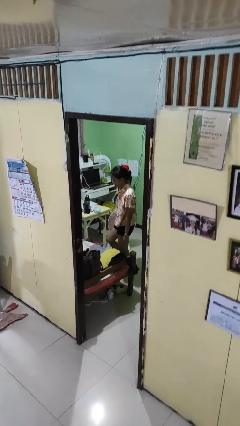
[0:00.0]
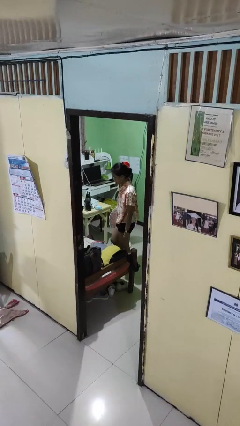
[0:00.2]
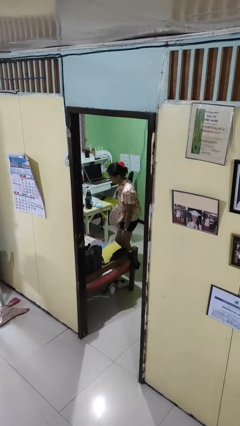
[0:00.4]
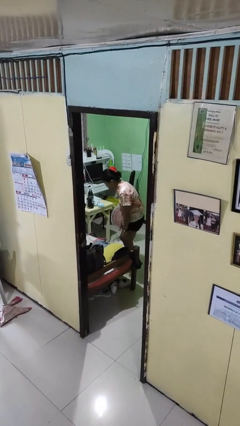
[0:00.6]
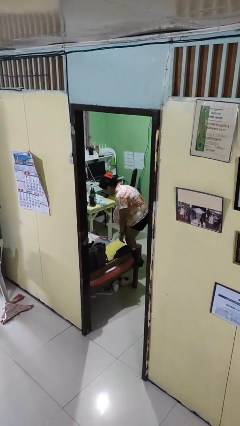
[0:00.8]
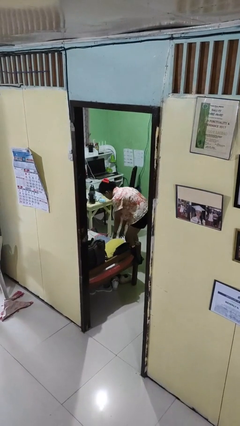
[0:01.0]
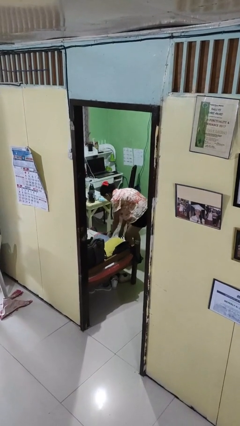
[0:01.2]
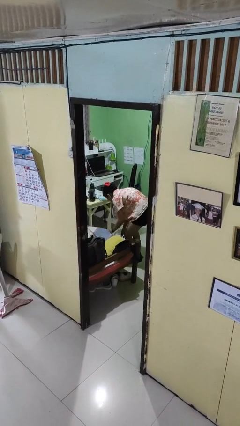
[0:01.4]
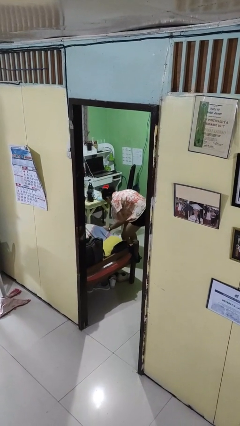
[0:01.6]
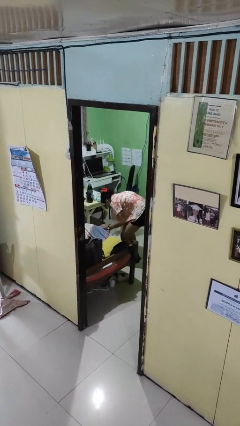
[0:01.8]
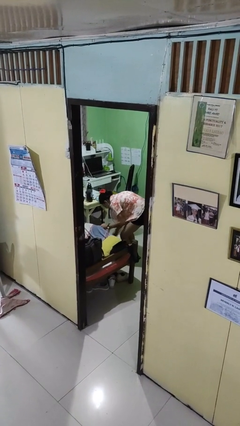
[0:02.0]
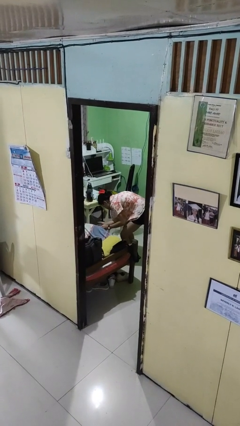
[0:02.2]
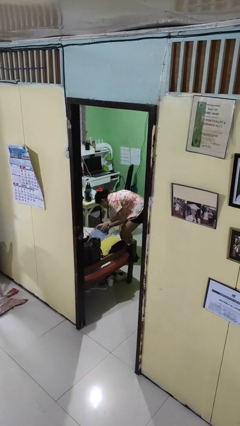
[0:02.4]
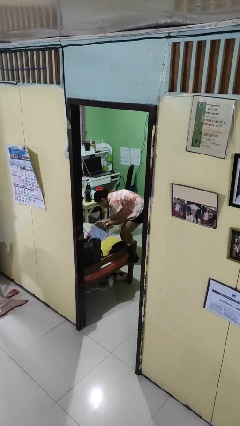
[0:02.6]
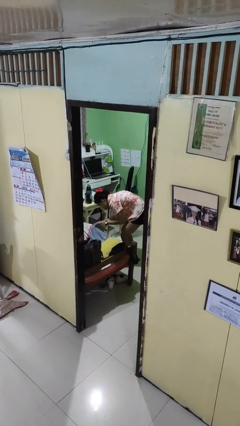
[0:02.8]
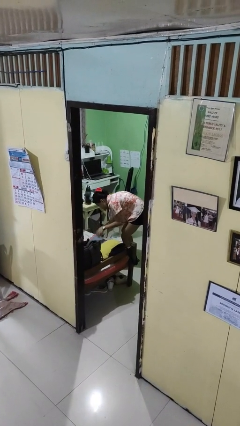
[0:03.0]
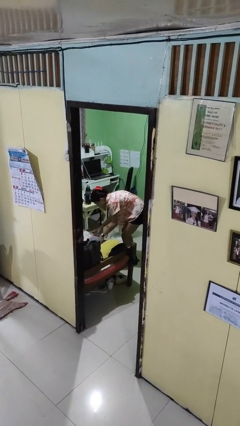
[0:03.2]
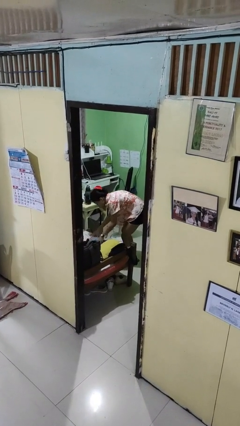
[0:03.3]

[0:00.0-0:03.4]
person searches under bed

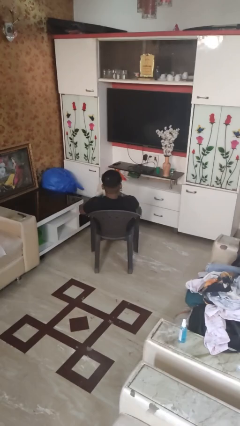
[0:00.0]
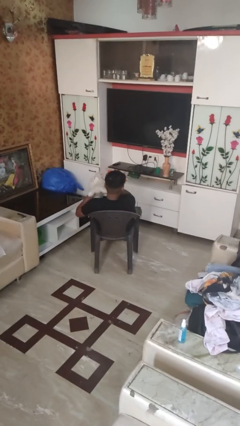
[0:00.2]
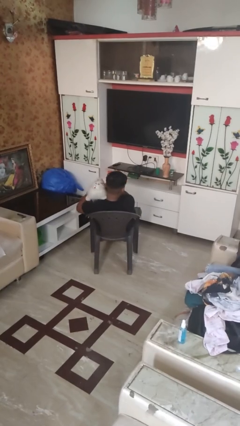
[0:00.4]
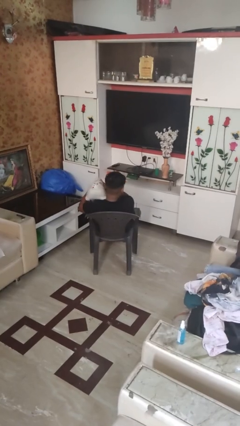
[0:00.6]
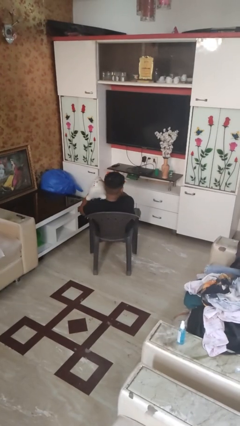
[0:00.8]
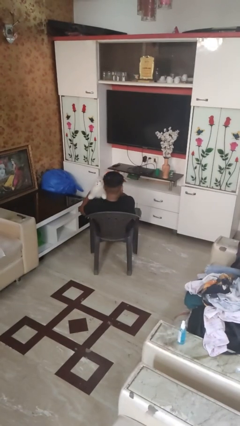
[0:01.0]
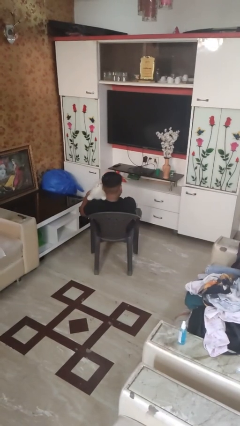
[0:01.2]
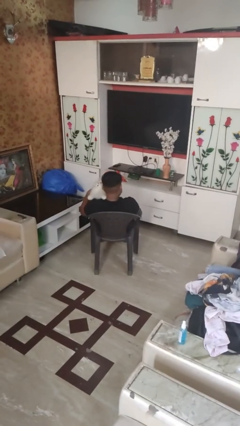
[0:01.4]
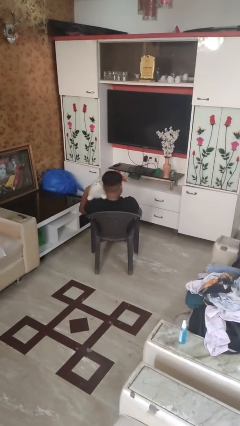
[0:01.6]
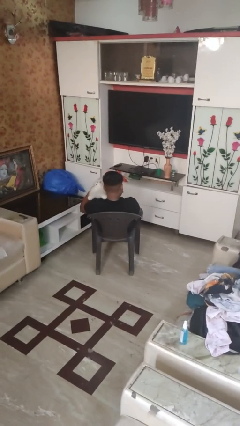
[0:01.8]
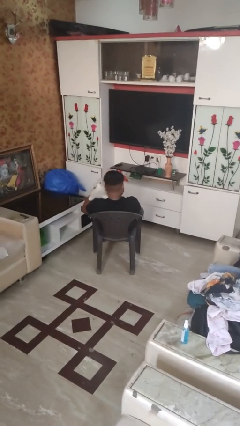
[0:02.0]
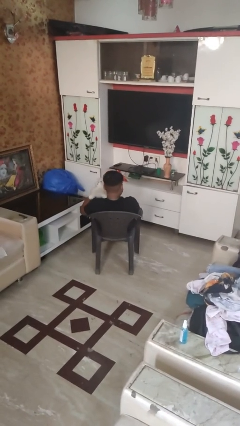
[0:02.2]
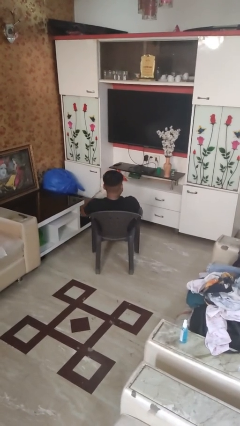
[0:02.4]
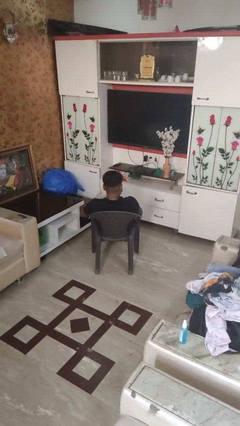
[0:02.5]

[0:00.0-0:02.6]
person hugs stuffed animal

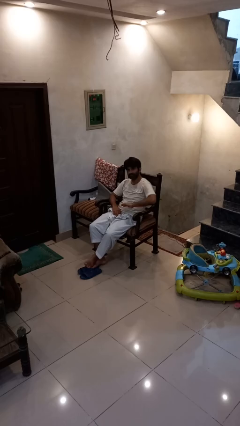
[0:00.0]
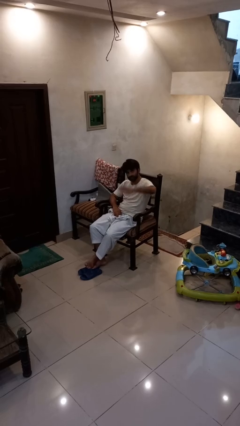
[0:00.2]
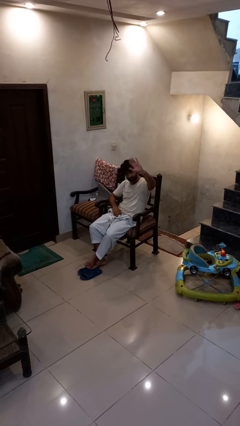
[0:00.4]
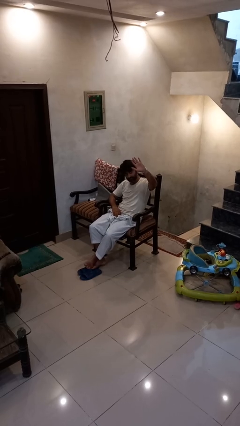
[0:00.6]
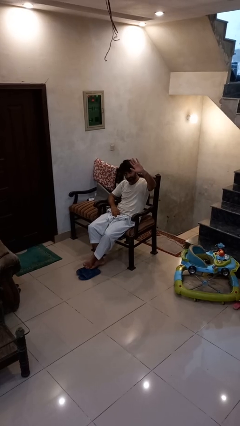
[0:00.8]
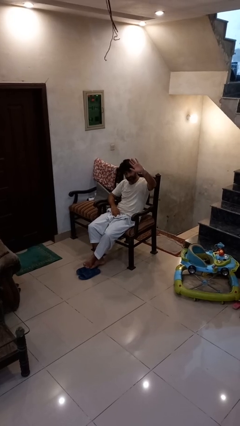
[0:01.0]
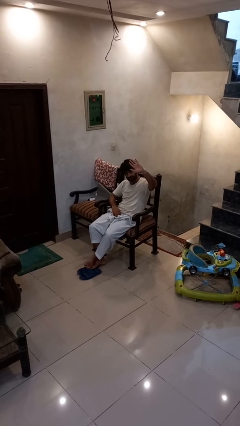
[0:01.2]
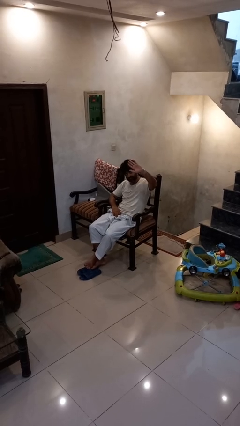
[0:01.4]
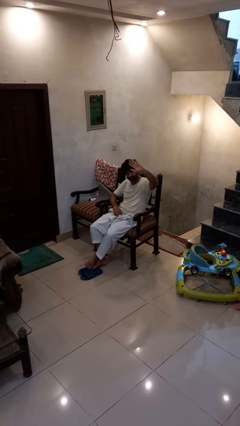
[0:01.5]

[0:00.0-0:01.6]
person gestures swipe up

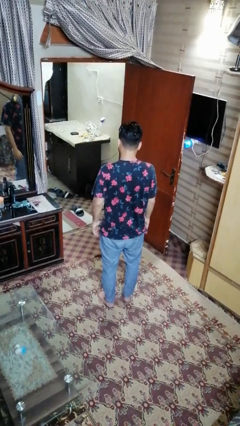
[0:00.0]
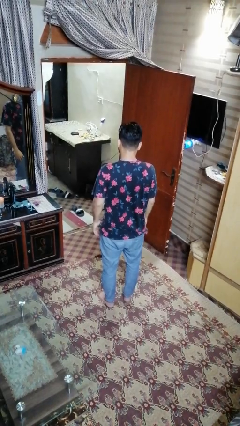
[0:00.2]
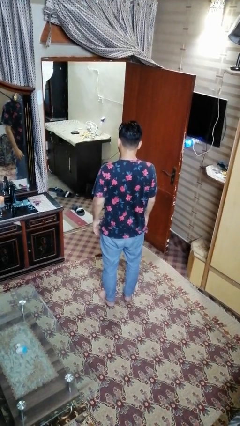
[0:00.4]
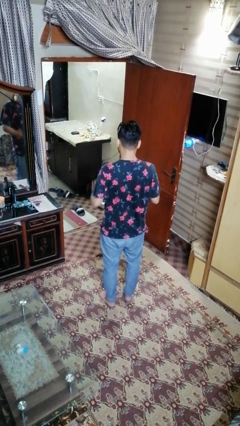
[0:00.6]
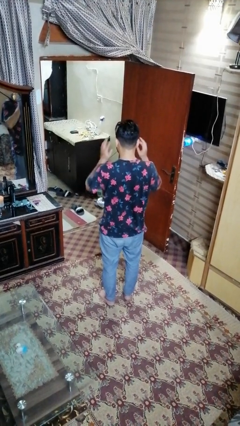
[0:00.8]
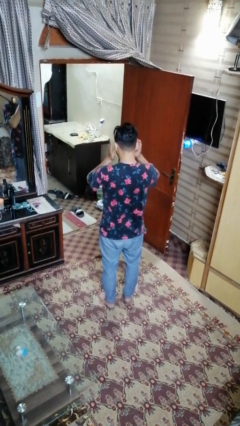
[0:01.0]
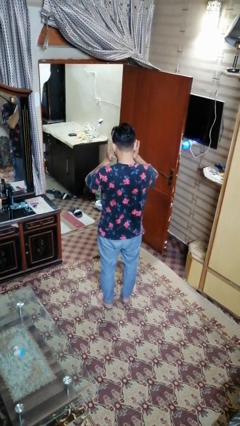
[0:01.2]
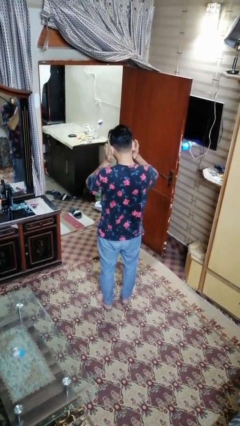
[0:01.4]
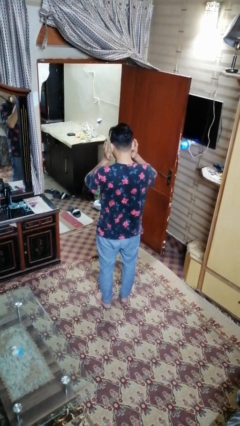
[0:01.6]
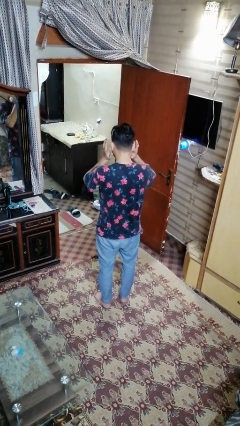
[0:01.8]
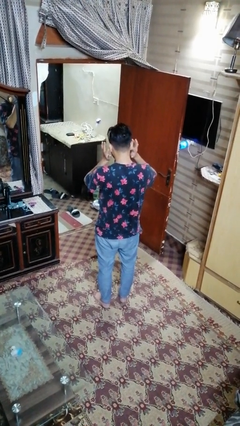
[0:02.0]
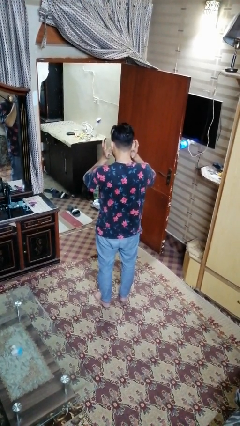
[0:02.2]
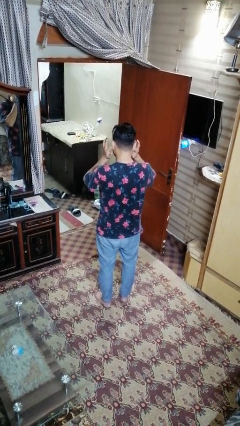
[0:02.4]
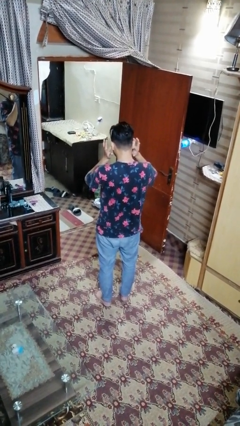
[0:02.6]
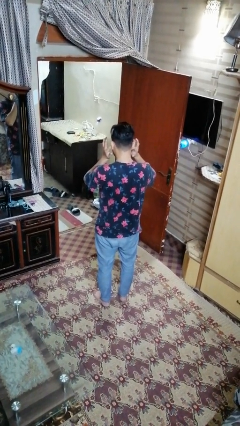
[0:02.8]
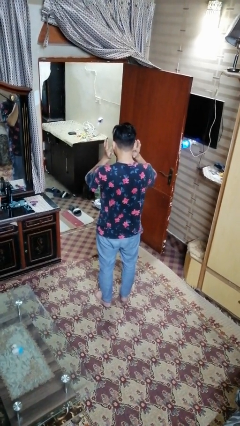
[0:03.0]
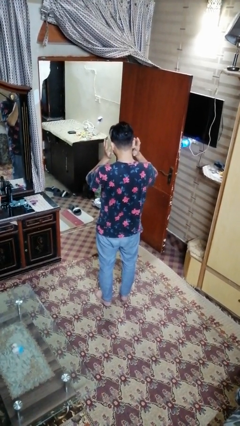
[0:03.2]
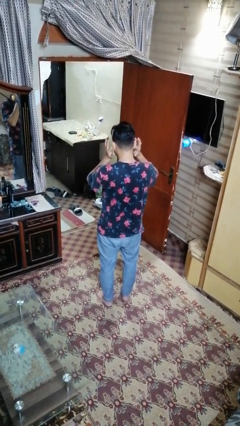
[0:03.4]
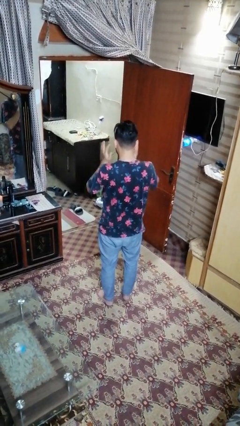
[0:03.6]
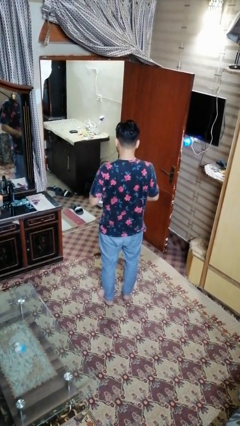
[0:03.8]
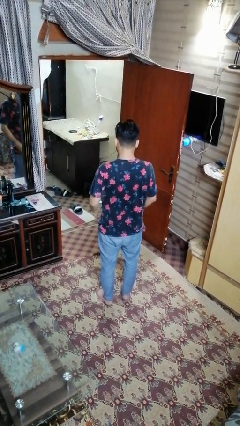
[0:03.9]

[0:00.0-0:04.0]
person puts fingers in ear

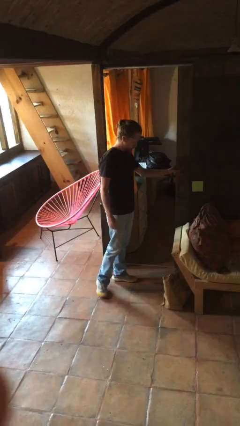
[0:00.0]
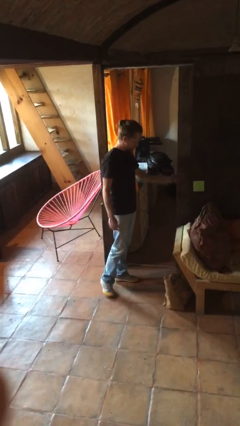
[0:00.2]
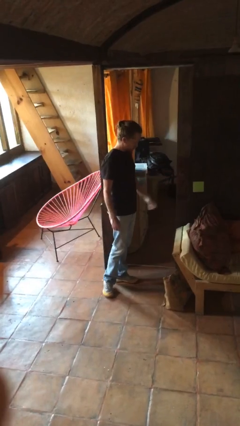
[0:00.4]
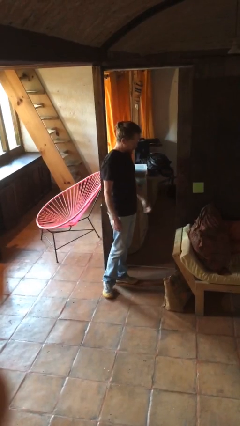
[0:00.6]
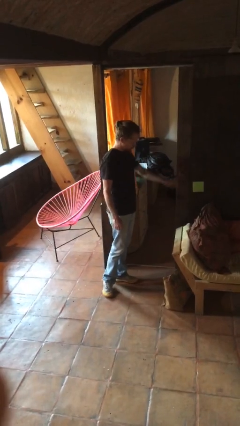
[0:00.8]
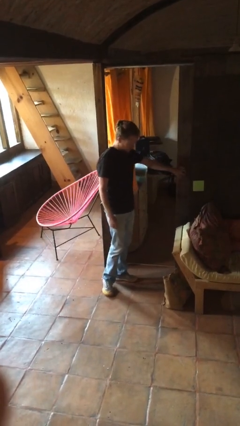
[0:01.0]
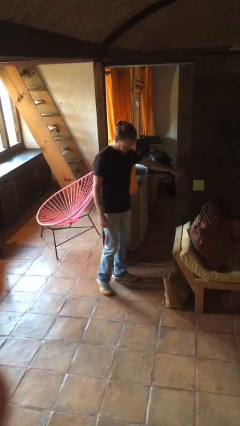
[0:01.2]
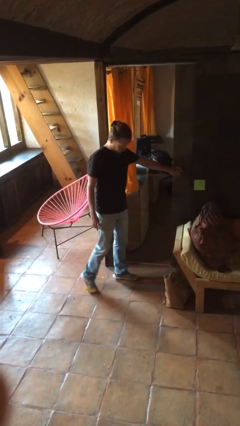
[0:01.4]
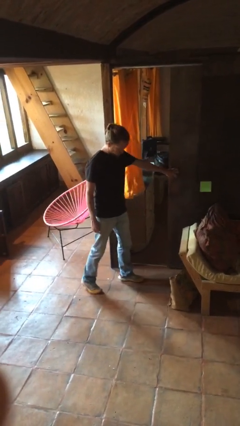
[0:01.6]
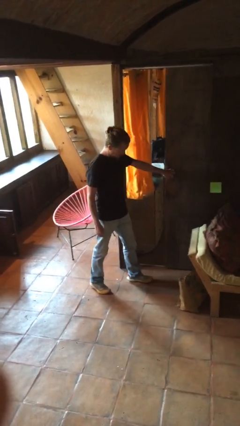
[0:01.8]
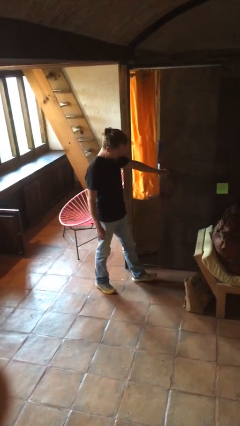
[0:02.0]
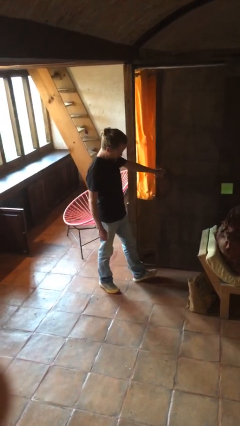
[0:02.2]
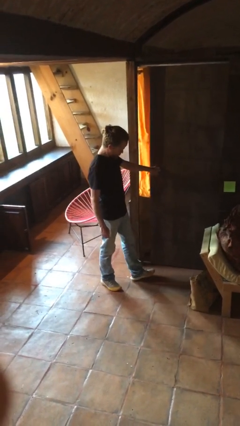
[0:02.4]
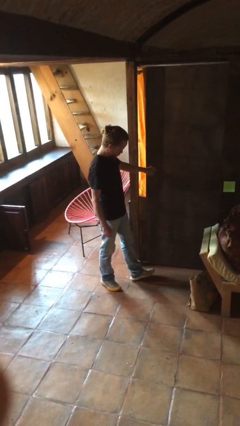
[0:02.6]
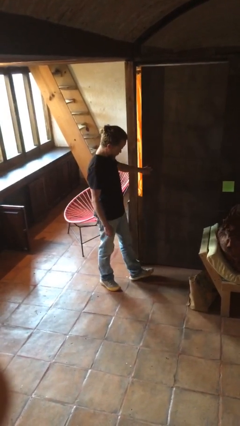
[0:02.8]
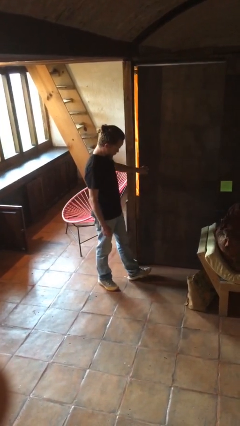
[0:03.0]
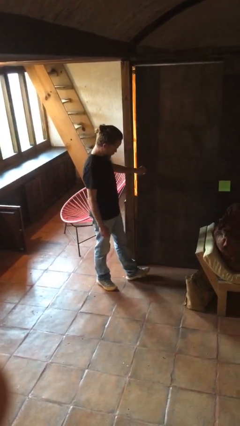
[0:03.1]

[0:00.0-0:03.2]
person closes sliding door

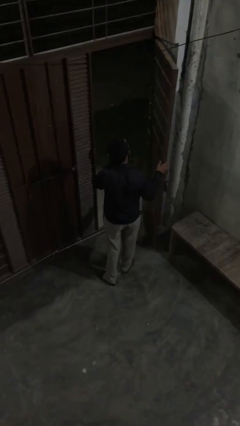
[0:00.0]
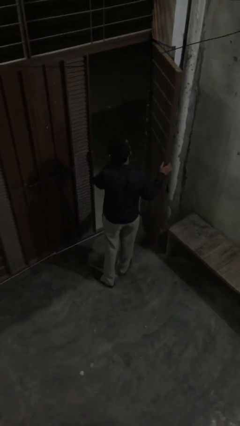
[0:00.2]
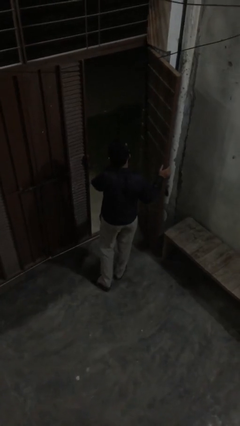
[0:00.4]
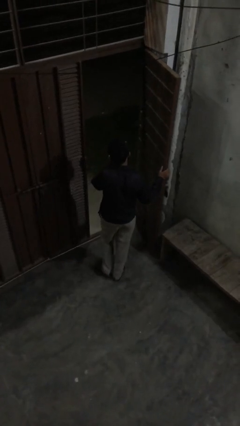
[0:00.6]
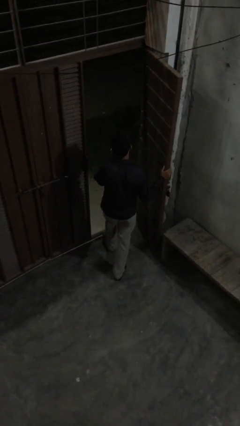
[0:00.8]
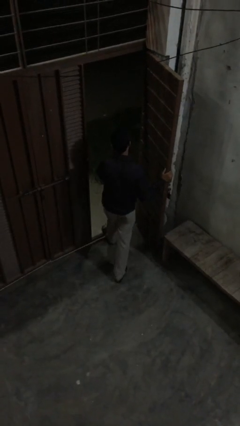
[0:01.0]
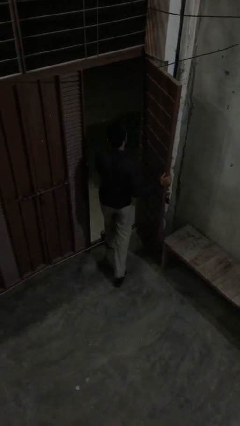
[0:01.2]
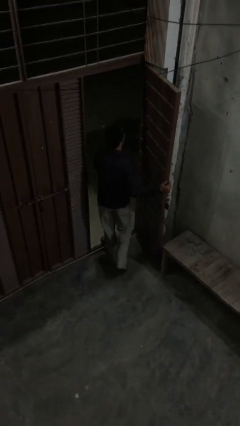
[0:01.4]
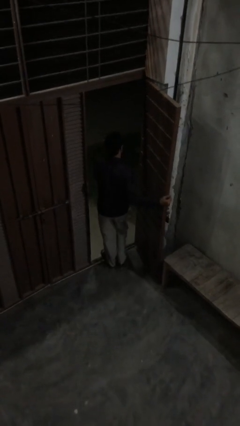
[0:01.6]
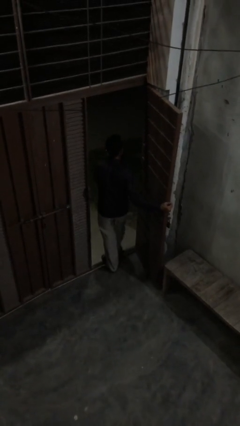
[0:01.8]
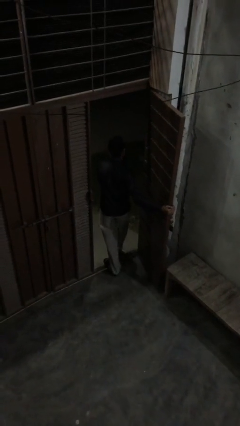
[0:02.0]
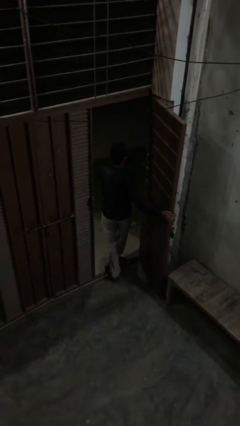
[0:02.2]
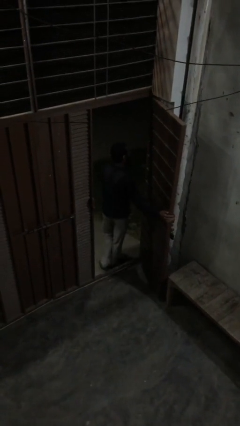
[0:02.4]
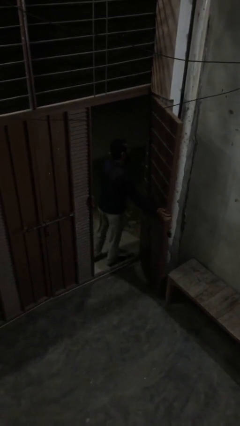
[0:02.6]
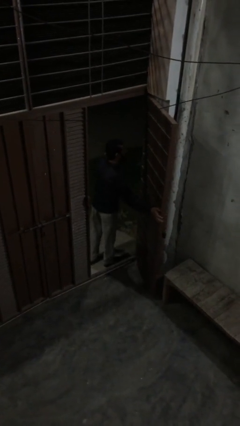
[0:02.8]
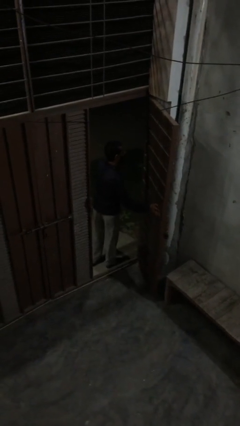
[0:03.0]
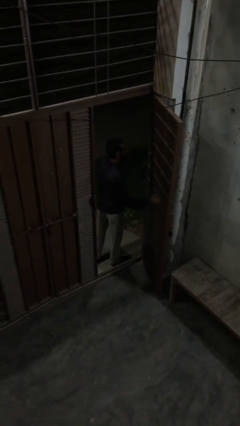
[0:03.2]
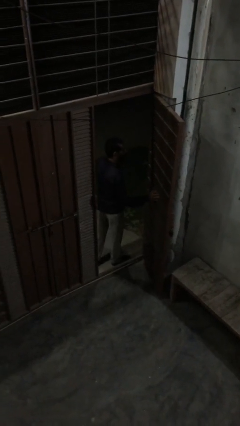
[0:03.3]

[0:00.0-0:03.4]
person exits scene through structure
